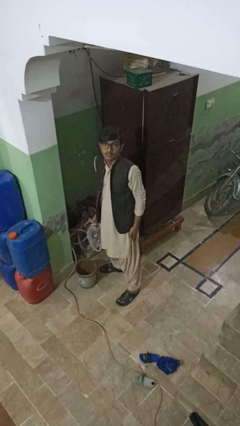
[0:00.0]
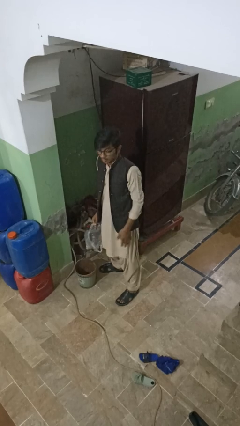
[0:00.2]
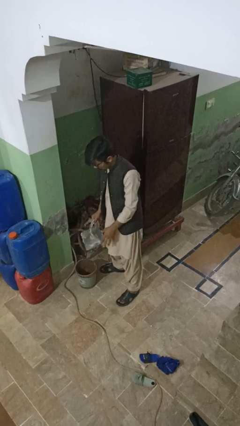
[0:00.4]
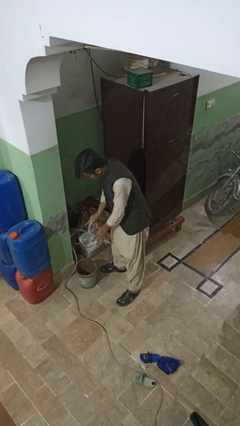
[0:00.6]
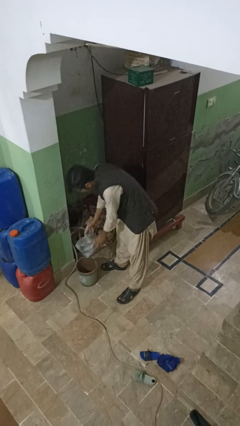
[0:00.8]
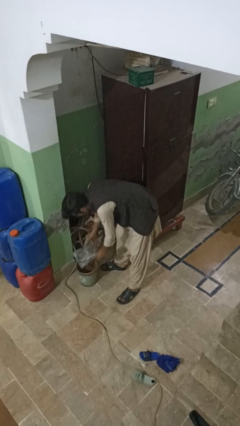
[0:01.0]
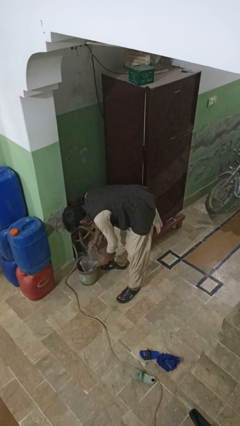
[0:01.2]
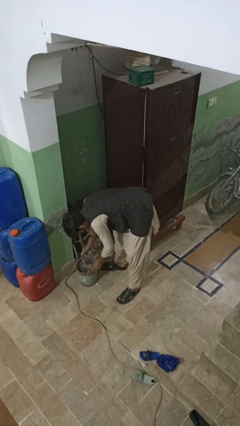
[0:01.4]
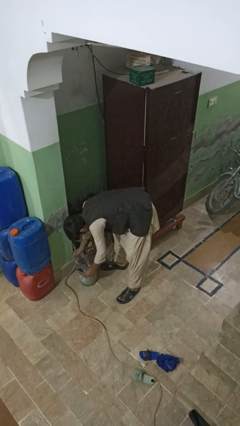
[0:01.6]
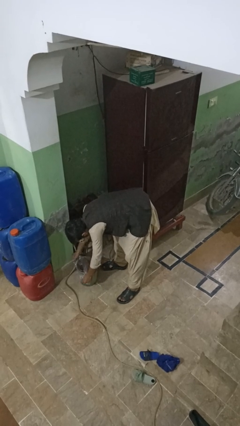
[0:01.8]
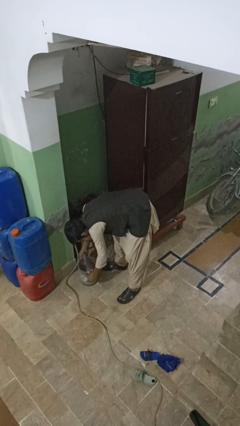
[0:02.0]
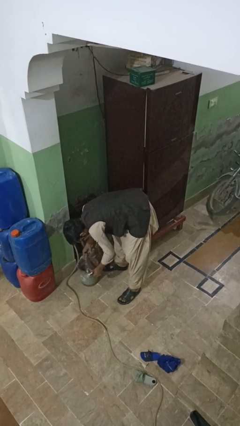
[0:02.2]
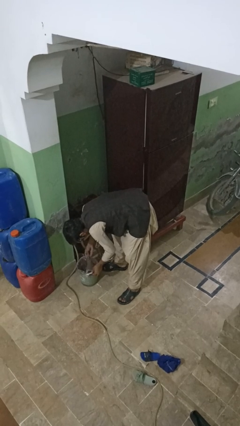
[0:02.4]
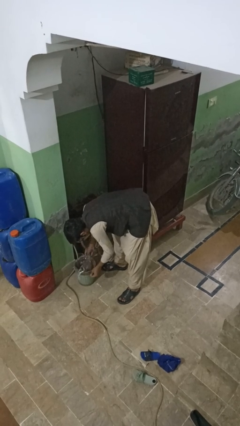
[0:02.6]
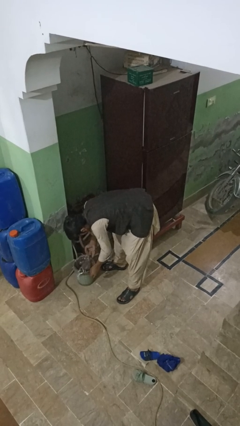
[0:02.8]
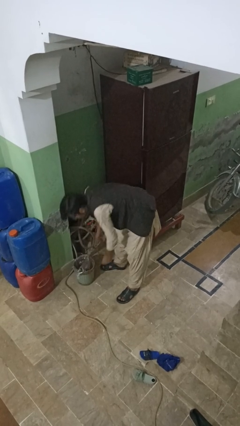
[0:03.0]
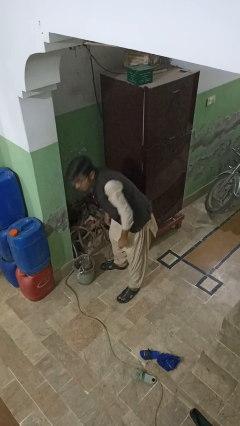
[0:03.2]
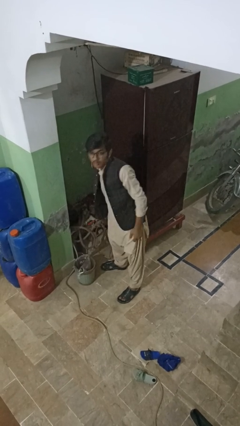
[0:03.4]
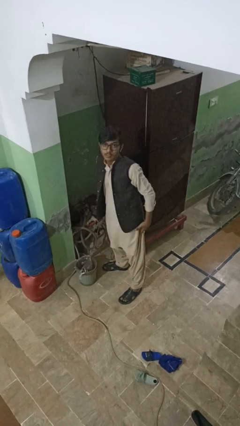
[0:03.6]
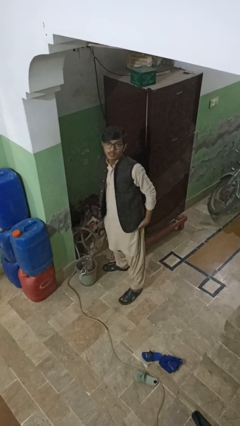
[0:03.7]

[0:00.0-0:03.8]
person inserts trashbag into trashcan

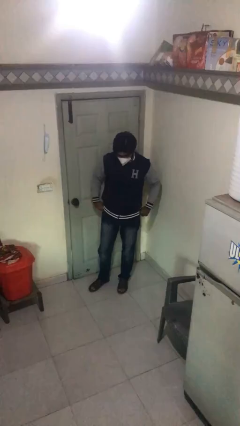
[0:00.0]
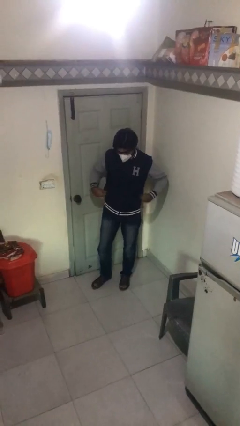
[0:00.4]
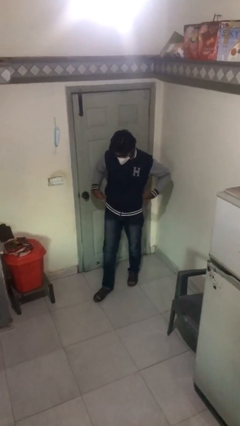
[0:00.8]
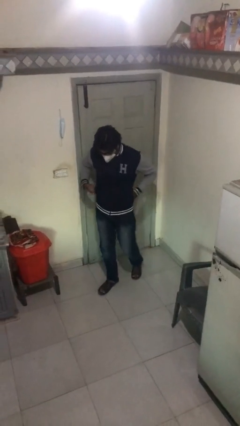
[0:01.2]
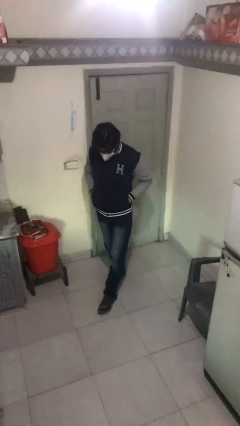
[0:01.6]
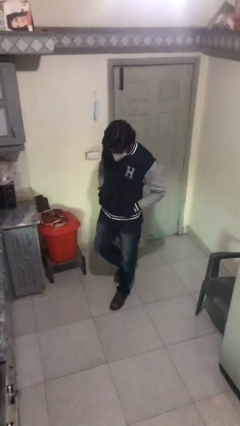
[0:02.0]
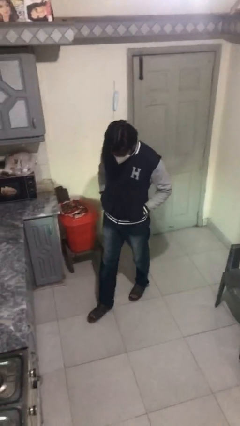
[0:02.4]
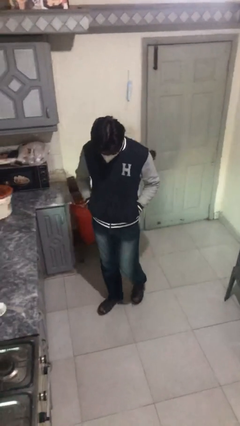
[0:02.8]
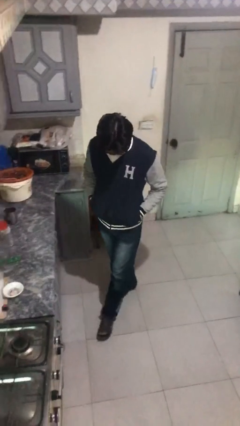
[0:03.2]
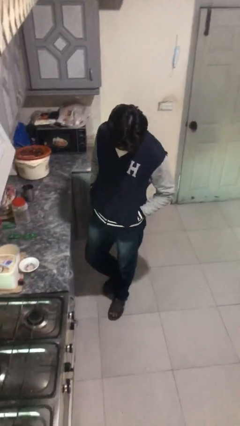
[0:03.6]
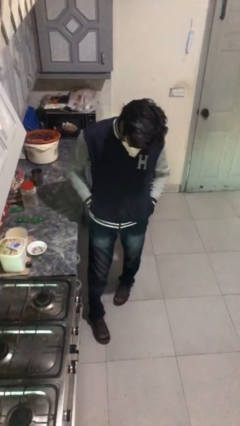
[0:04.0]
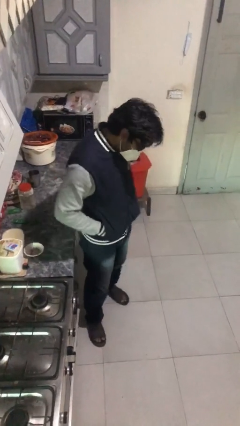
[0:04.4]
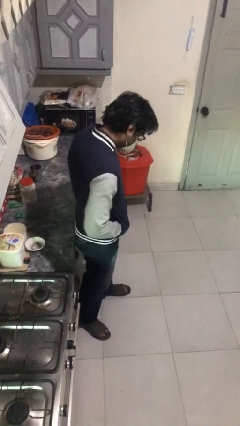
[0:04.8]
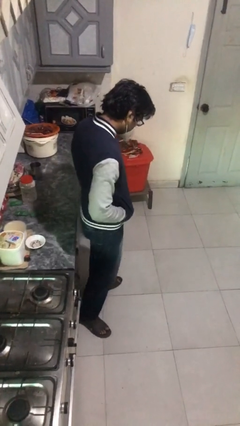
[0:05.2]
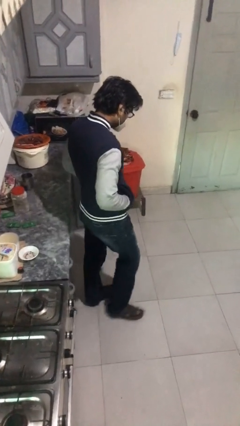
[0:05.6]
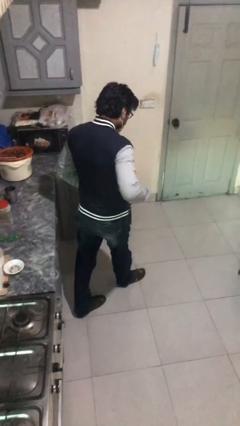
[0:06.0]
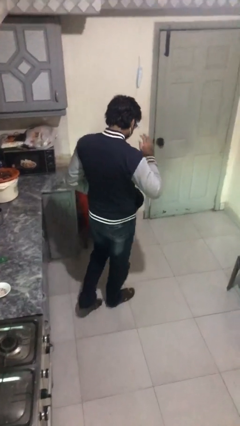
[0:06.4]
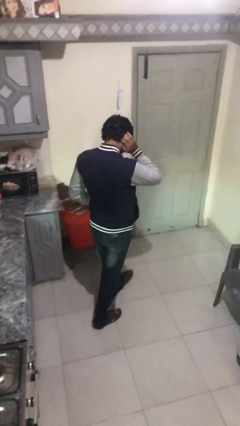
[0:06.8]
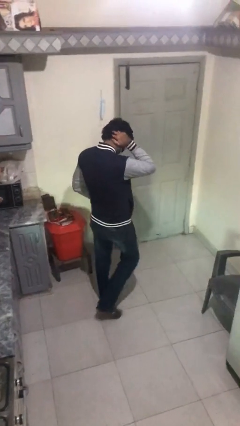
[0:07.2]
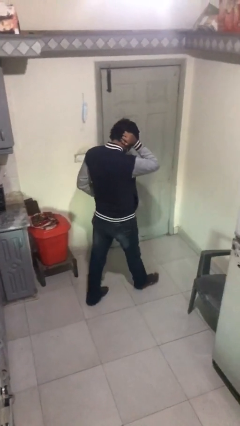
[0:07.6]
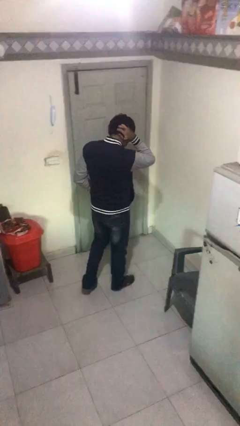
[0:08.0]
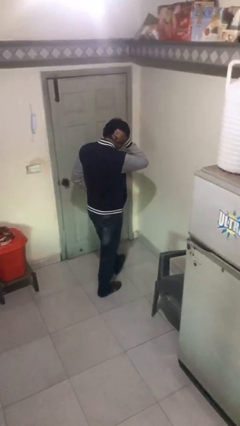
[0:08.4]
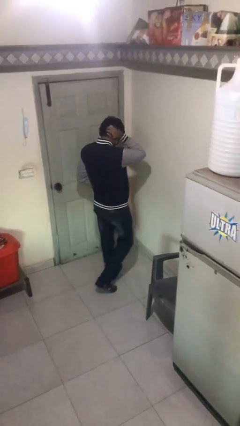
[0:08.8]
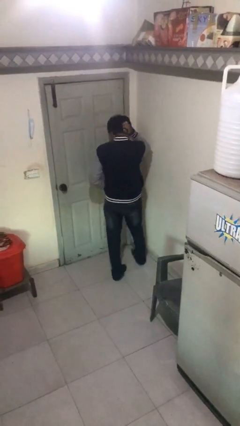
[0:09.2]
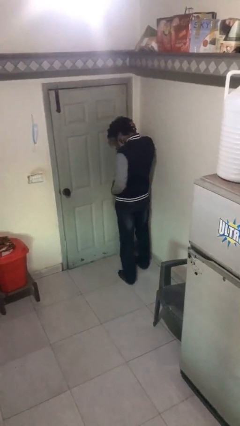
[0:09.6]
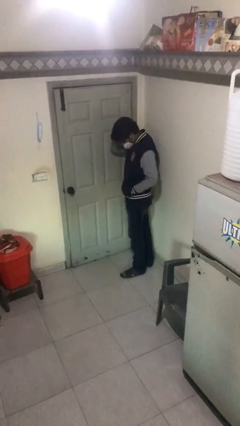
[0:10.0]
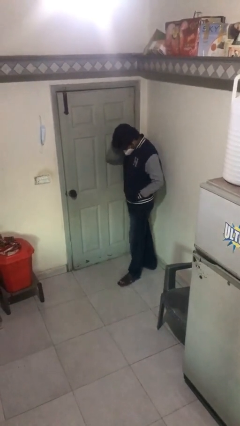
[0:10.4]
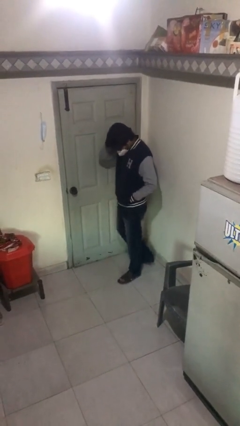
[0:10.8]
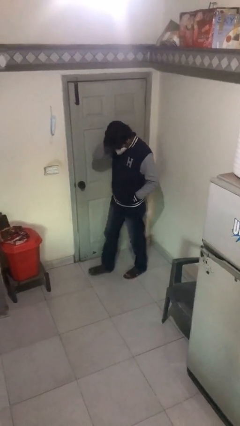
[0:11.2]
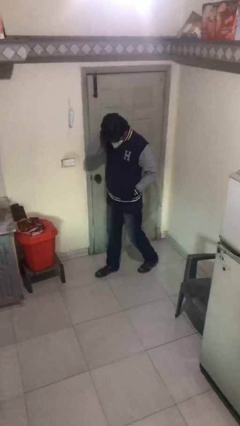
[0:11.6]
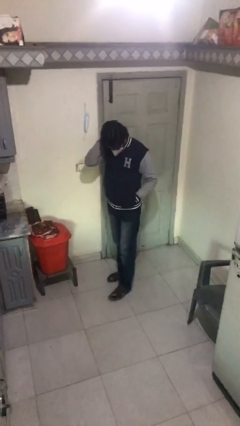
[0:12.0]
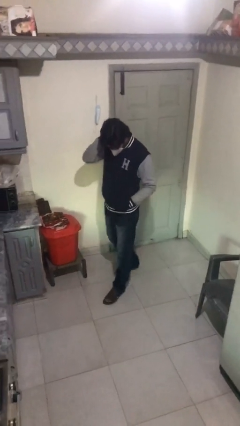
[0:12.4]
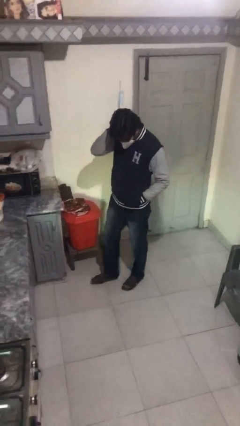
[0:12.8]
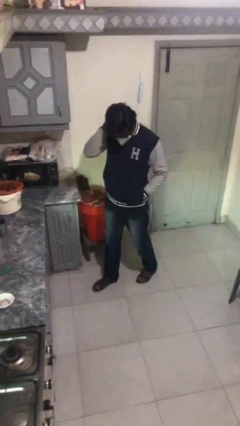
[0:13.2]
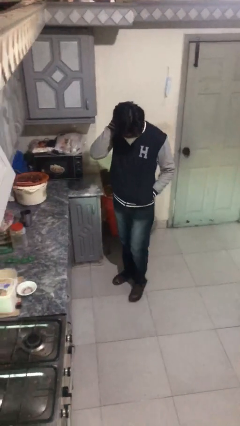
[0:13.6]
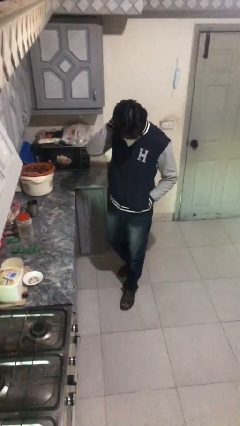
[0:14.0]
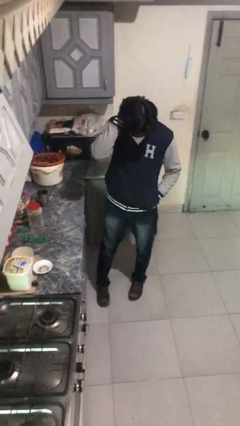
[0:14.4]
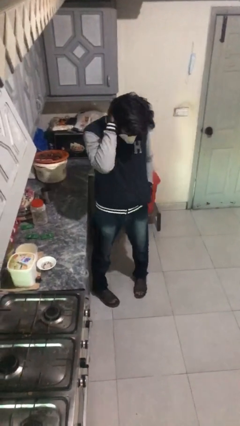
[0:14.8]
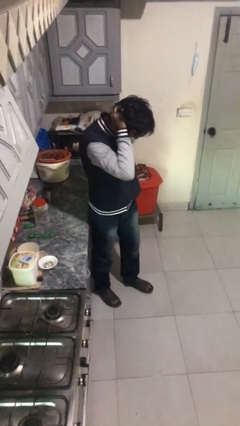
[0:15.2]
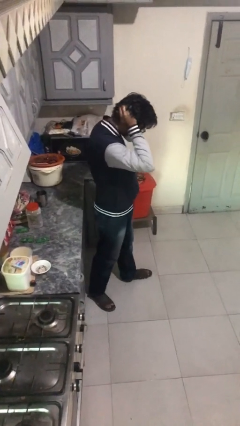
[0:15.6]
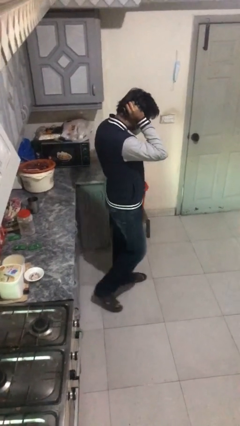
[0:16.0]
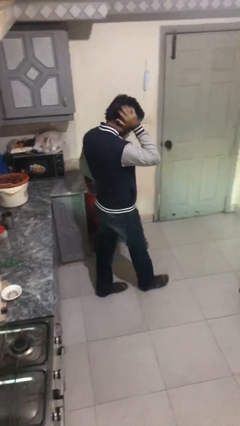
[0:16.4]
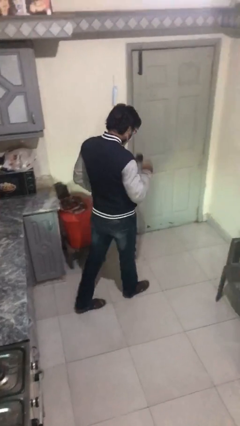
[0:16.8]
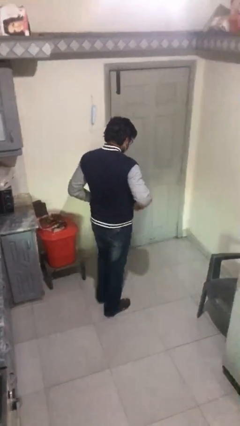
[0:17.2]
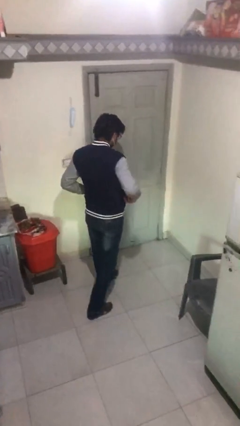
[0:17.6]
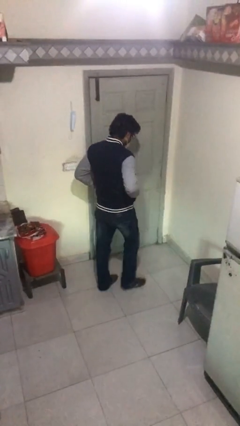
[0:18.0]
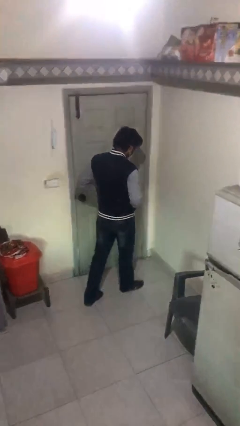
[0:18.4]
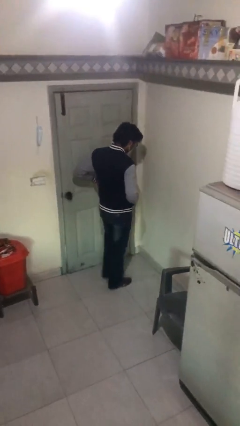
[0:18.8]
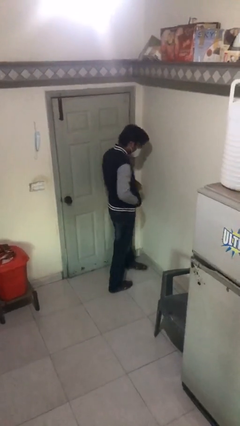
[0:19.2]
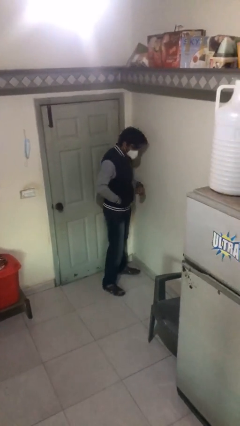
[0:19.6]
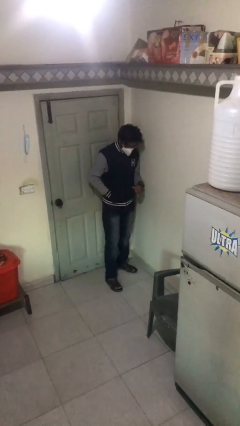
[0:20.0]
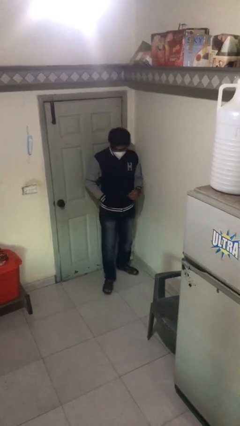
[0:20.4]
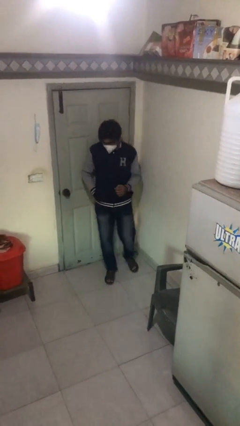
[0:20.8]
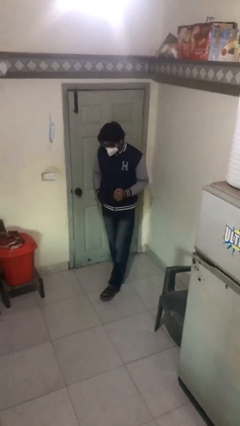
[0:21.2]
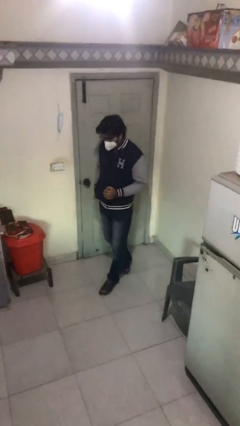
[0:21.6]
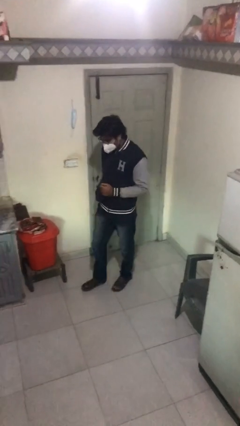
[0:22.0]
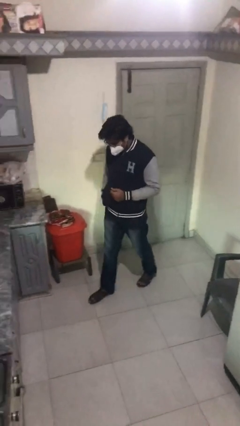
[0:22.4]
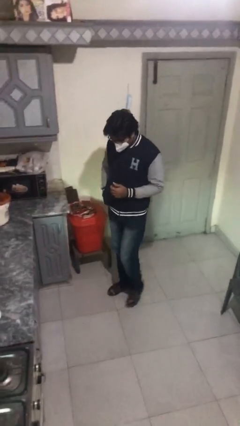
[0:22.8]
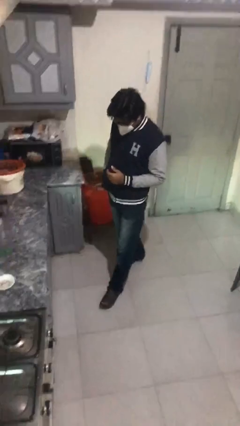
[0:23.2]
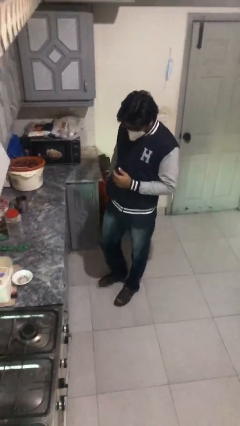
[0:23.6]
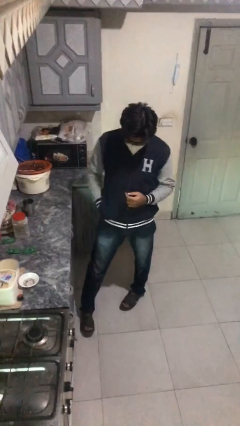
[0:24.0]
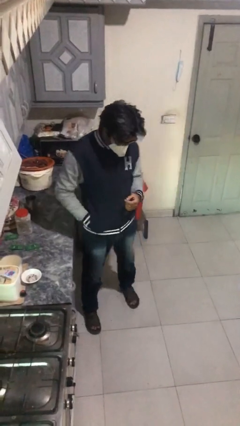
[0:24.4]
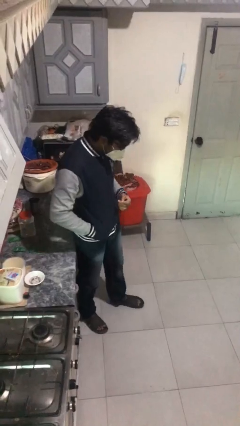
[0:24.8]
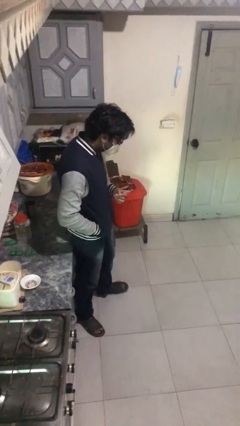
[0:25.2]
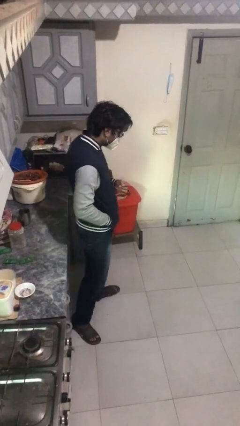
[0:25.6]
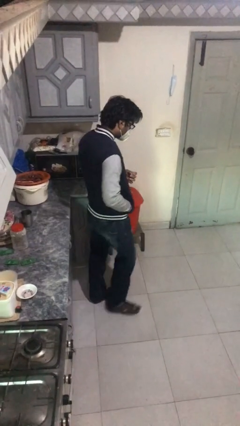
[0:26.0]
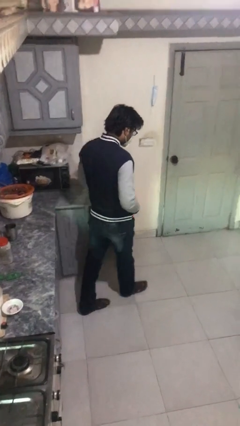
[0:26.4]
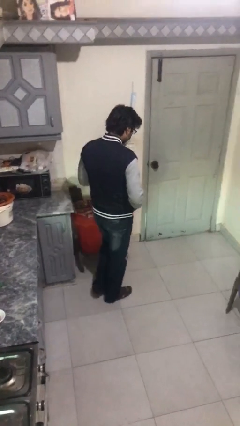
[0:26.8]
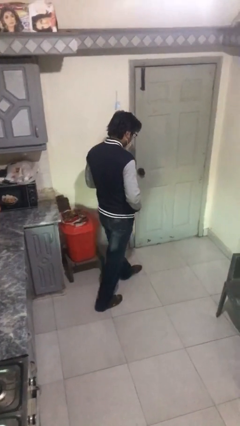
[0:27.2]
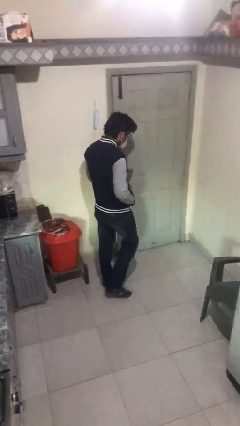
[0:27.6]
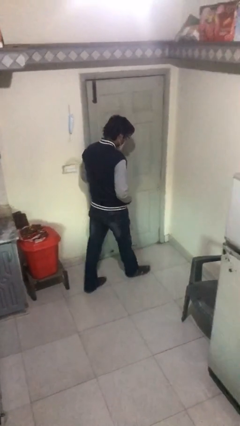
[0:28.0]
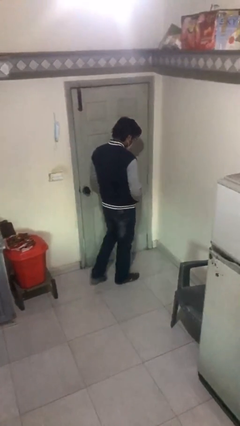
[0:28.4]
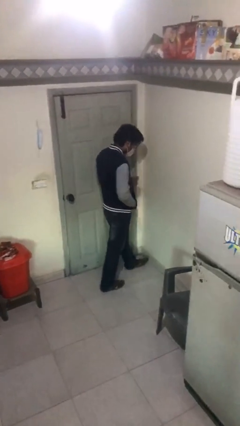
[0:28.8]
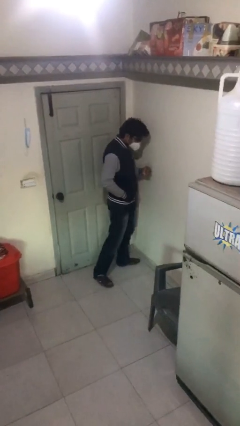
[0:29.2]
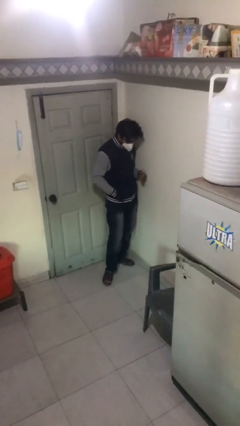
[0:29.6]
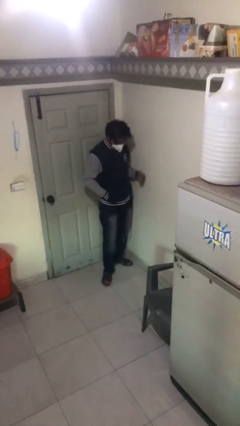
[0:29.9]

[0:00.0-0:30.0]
person walks
